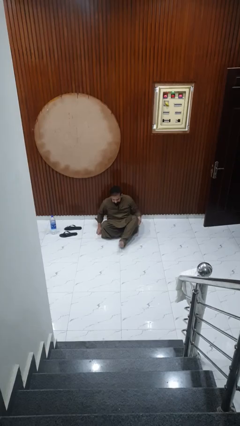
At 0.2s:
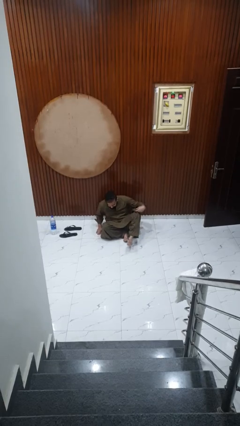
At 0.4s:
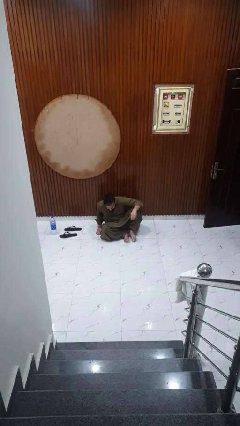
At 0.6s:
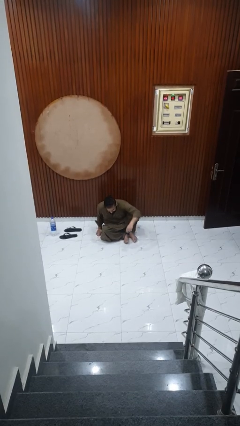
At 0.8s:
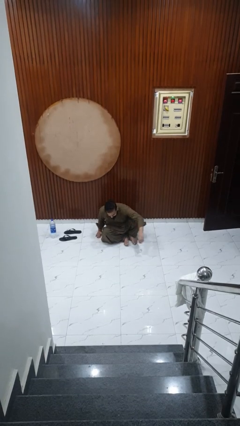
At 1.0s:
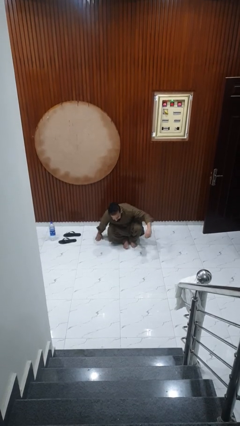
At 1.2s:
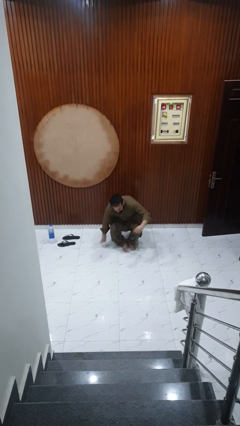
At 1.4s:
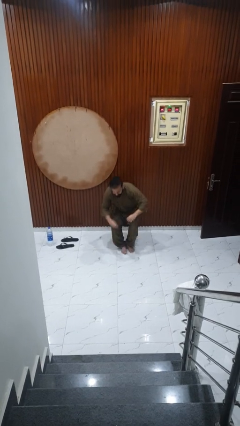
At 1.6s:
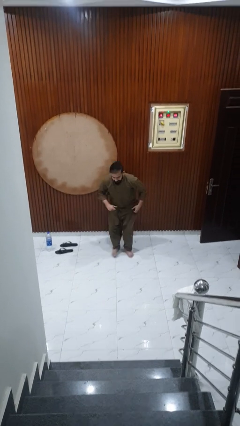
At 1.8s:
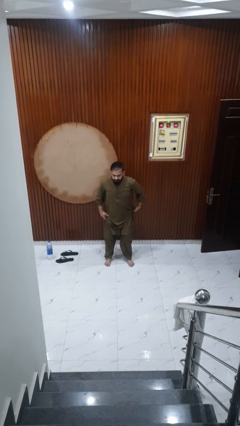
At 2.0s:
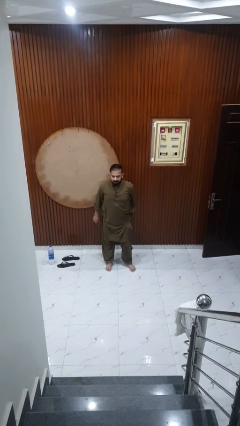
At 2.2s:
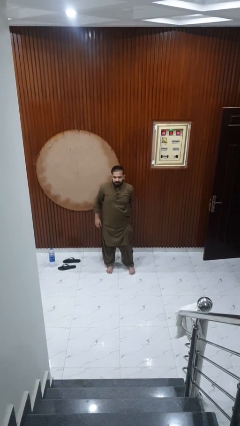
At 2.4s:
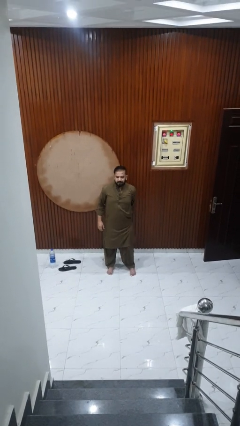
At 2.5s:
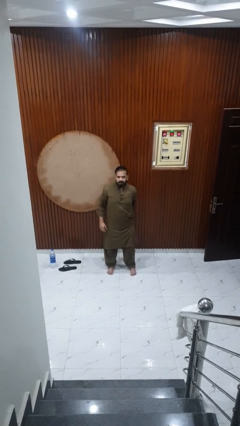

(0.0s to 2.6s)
person stands up from floor

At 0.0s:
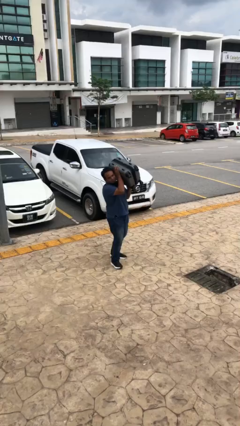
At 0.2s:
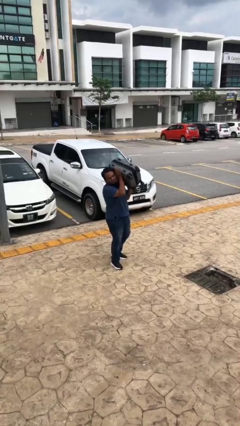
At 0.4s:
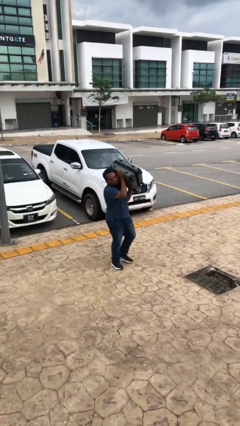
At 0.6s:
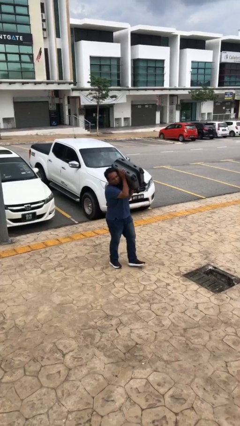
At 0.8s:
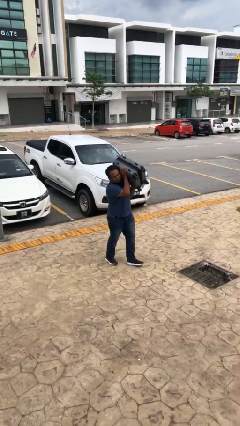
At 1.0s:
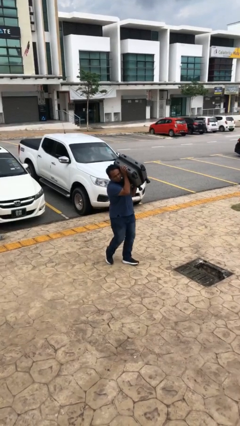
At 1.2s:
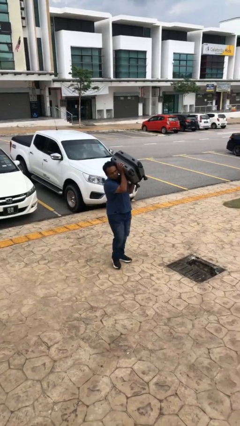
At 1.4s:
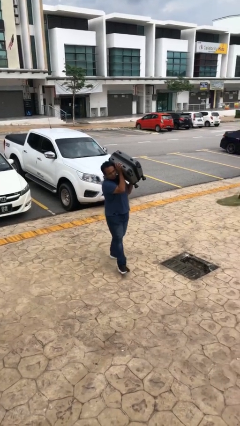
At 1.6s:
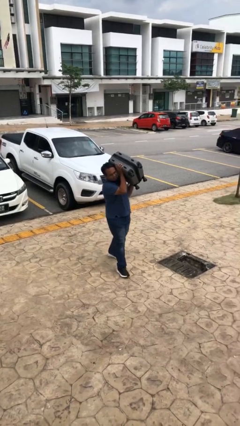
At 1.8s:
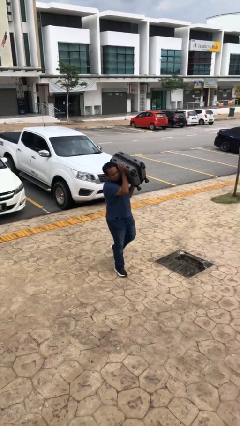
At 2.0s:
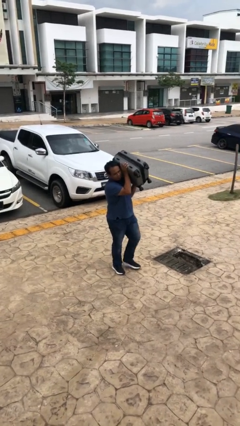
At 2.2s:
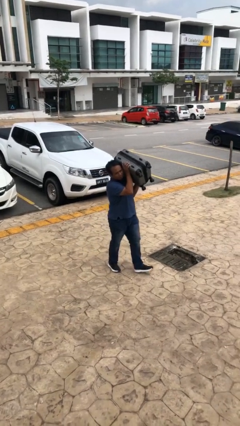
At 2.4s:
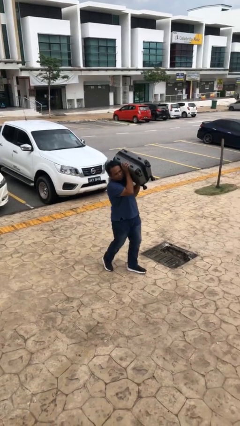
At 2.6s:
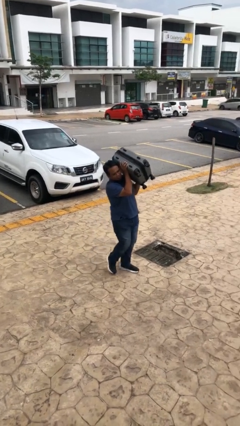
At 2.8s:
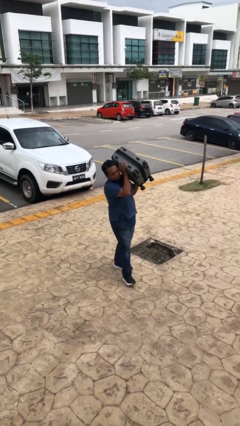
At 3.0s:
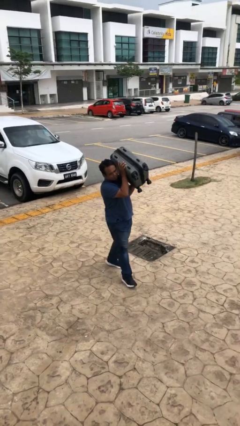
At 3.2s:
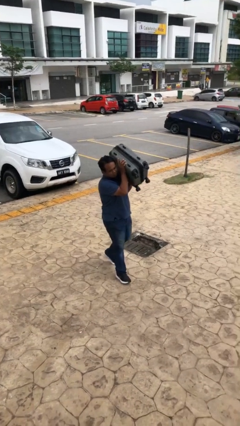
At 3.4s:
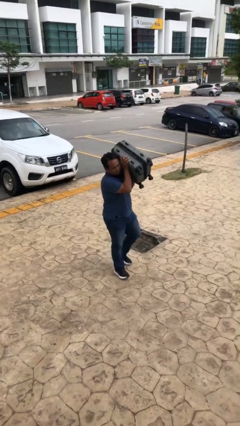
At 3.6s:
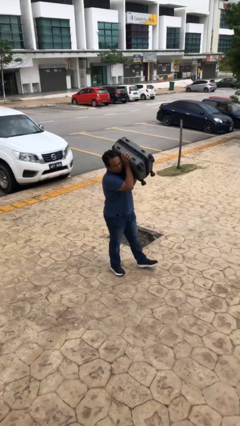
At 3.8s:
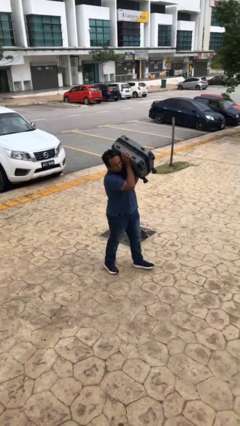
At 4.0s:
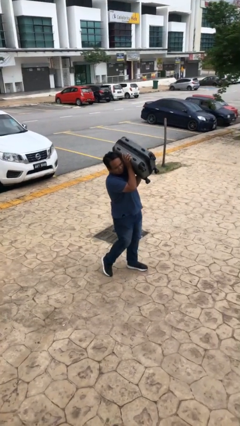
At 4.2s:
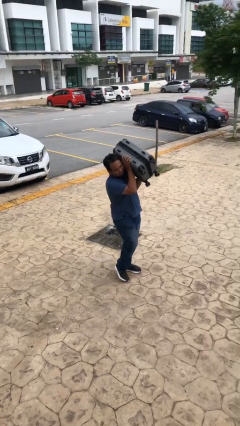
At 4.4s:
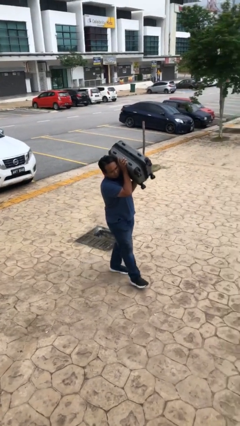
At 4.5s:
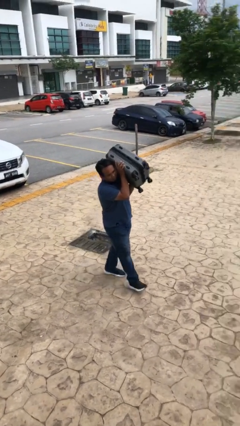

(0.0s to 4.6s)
person carries heavy object

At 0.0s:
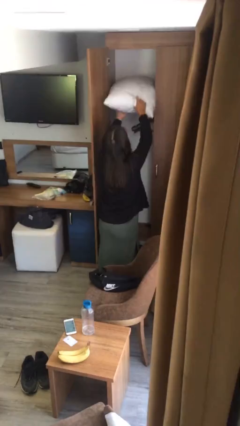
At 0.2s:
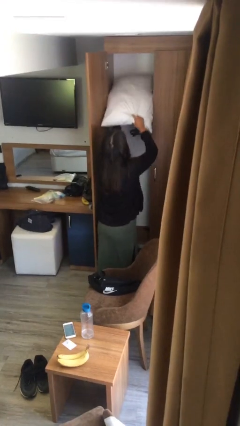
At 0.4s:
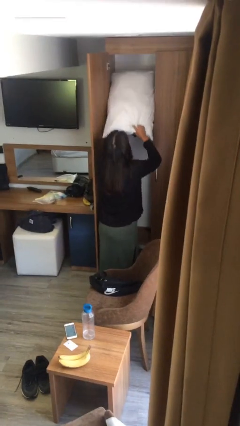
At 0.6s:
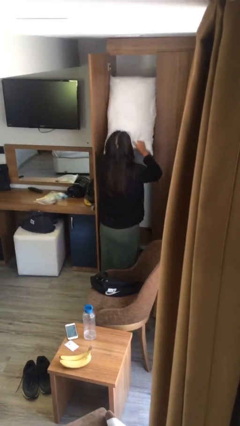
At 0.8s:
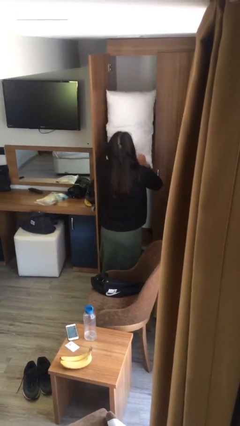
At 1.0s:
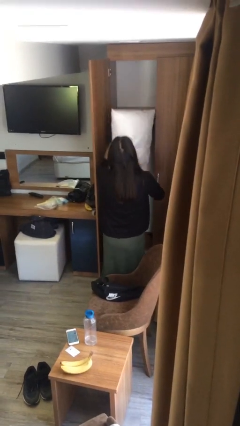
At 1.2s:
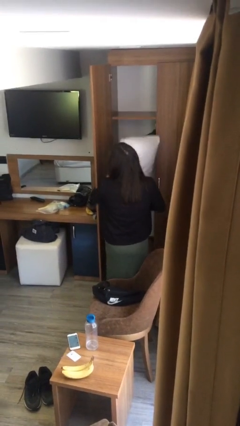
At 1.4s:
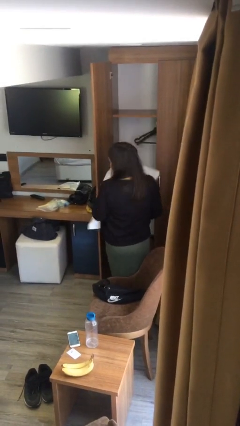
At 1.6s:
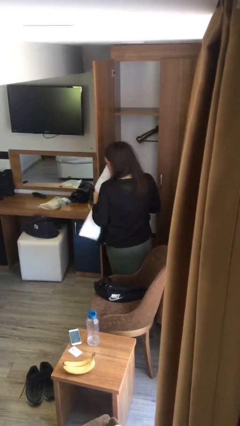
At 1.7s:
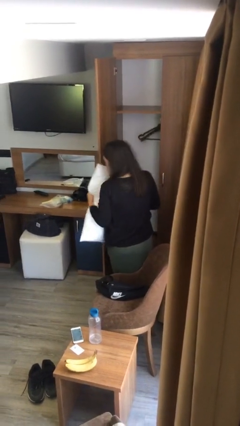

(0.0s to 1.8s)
person picks up object from shelf

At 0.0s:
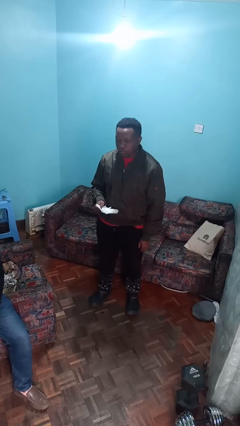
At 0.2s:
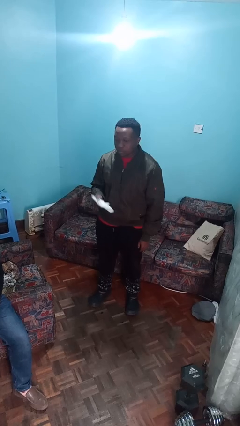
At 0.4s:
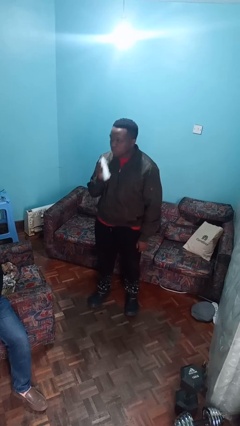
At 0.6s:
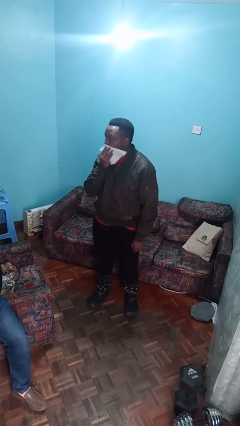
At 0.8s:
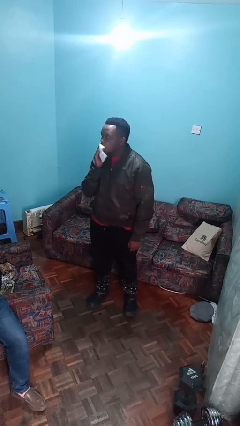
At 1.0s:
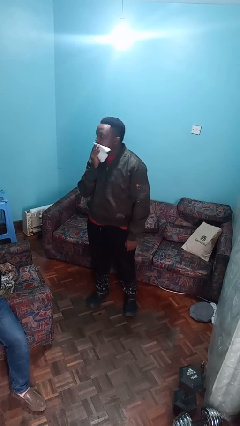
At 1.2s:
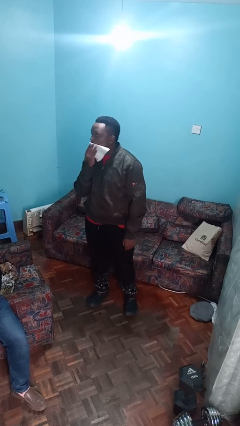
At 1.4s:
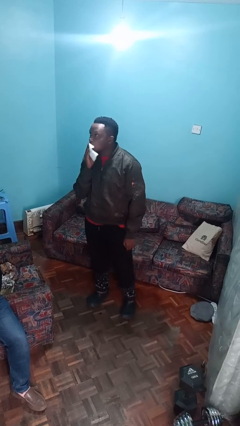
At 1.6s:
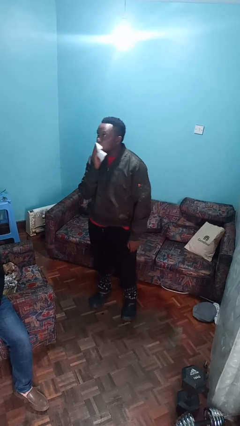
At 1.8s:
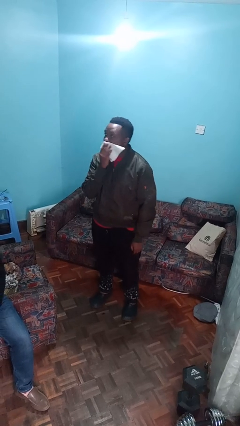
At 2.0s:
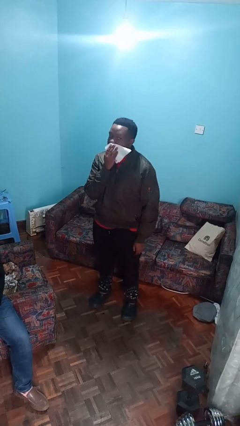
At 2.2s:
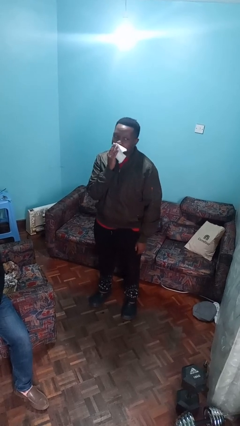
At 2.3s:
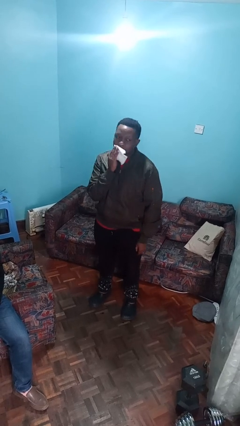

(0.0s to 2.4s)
person wipes mouth with napkin

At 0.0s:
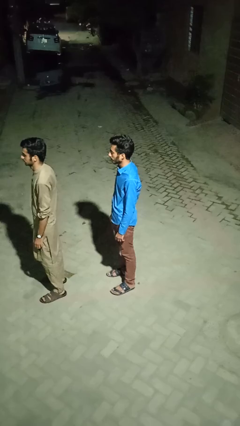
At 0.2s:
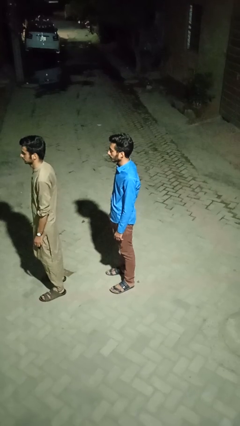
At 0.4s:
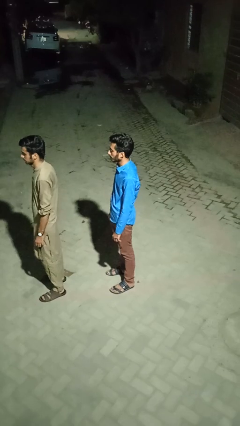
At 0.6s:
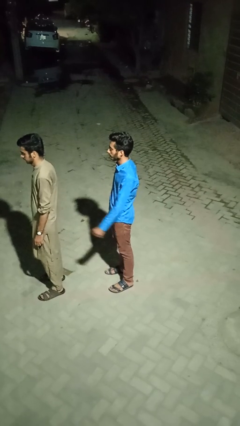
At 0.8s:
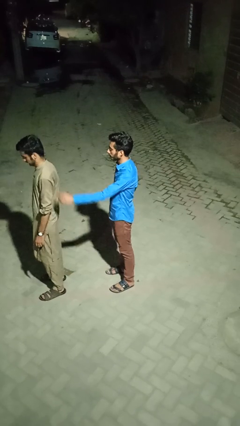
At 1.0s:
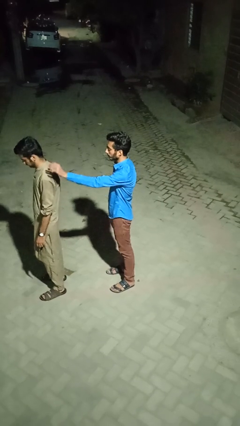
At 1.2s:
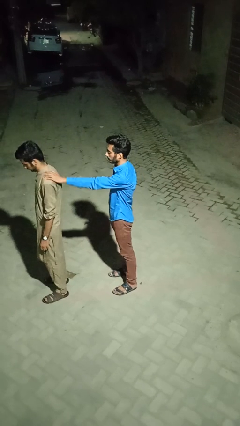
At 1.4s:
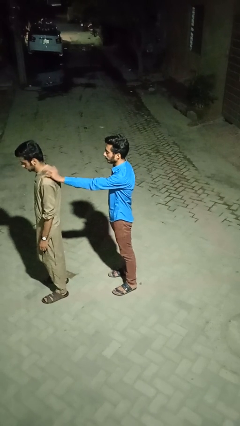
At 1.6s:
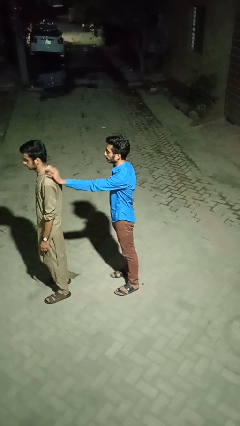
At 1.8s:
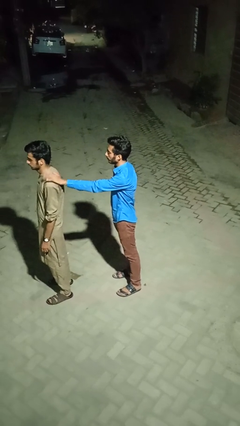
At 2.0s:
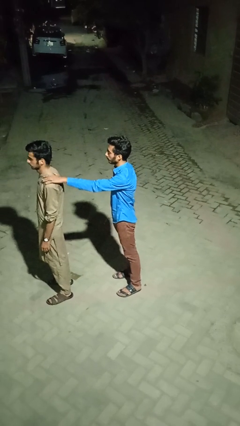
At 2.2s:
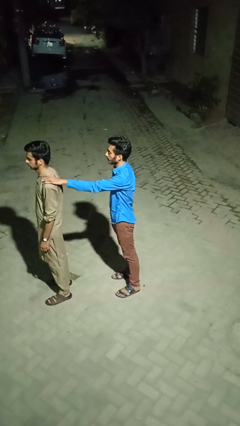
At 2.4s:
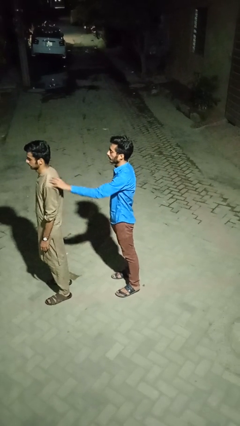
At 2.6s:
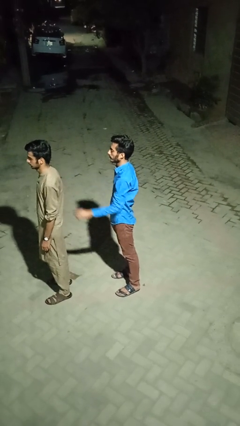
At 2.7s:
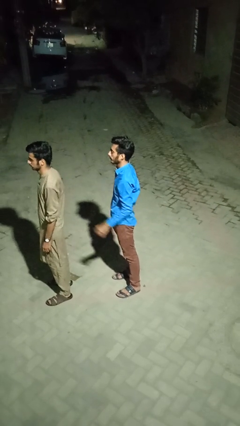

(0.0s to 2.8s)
person touches back of person

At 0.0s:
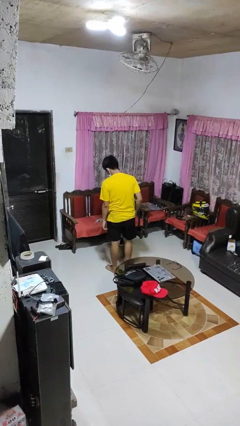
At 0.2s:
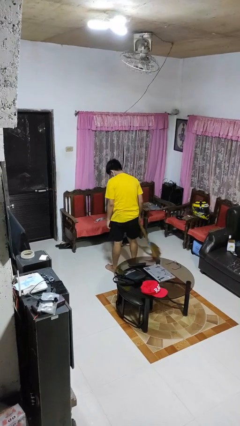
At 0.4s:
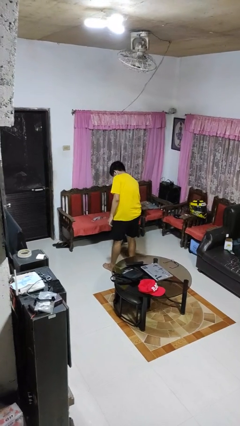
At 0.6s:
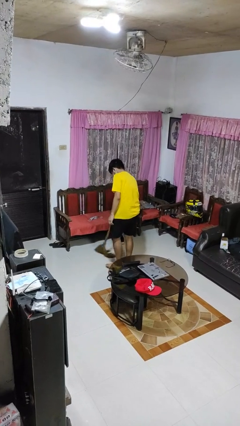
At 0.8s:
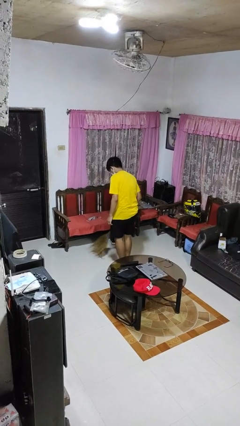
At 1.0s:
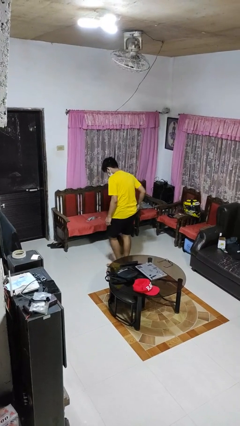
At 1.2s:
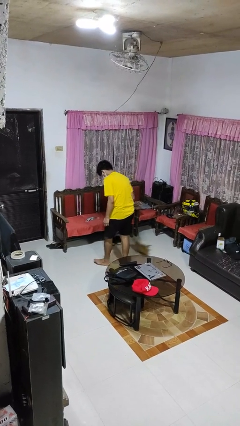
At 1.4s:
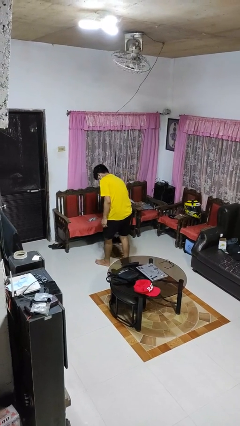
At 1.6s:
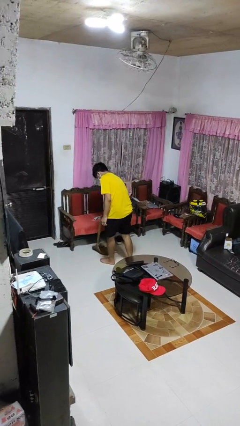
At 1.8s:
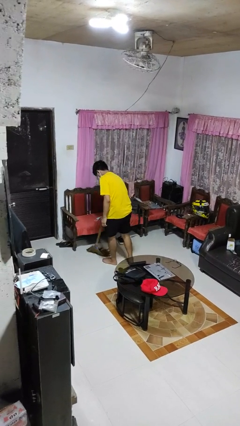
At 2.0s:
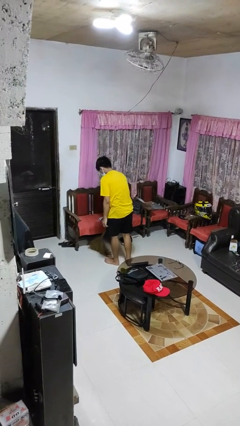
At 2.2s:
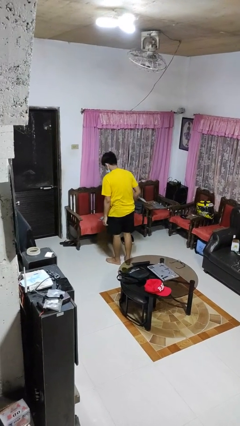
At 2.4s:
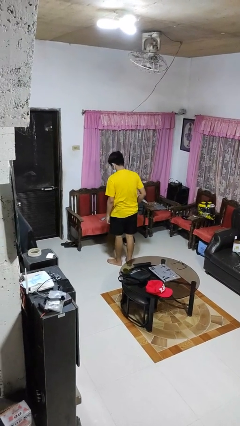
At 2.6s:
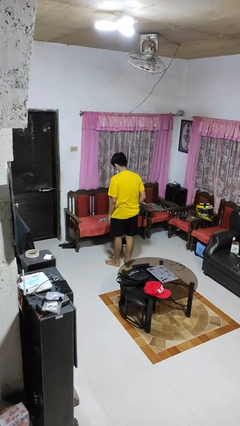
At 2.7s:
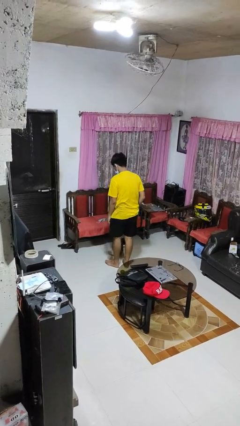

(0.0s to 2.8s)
person sweeps floor

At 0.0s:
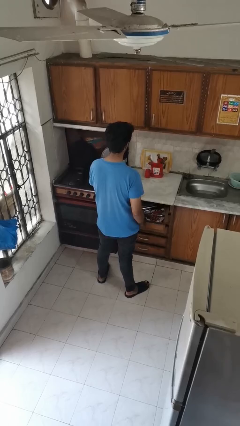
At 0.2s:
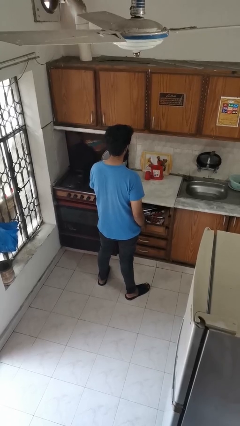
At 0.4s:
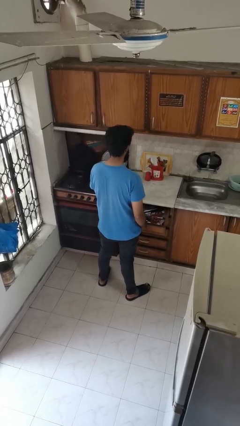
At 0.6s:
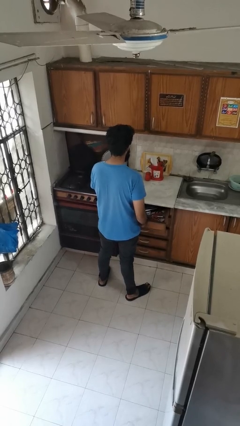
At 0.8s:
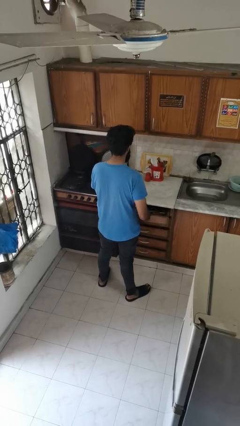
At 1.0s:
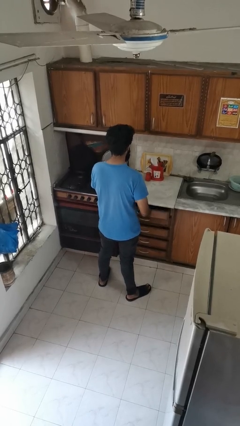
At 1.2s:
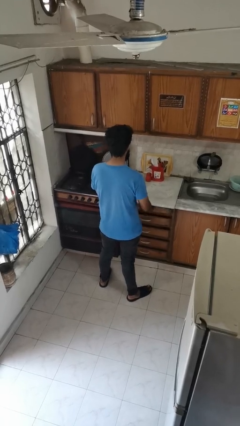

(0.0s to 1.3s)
person closes kitchen drawer
